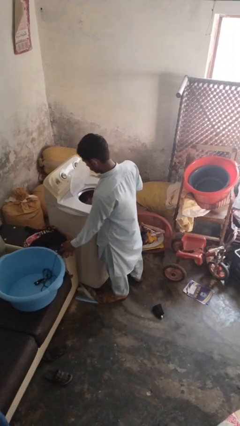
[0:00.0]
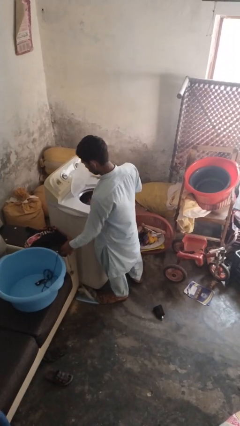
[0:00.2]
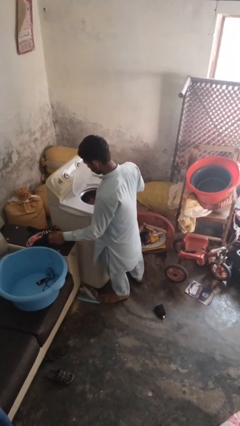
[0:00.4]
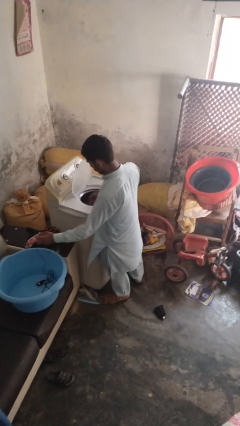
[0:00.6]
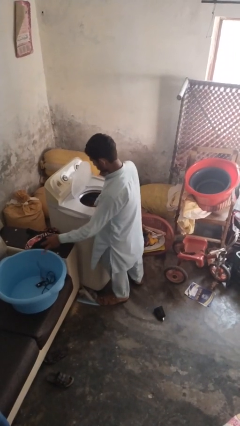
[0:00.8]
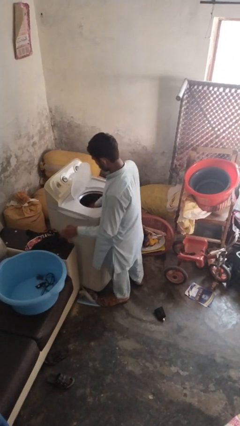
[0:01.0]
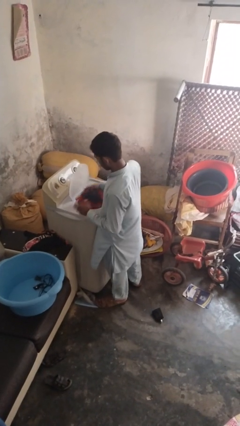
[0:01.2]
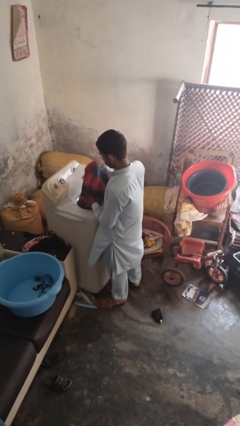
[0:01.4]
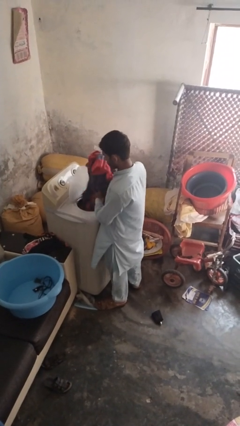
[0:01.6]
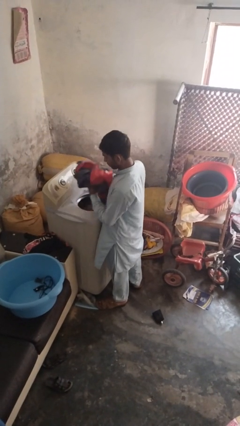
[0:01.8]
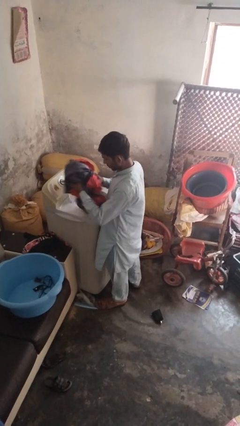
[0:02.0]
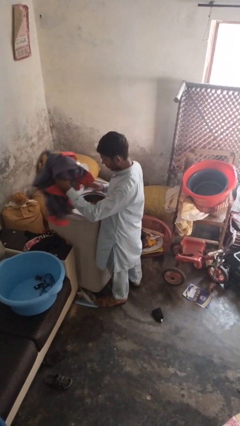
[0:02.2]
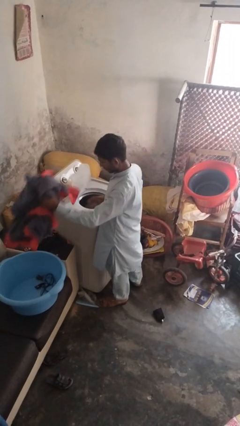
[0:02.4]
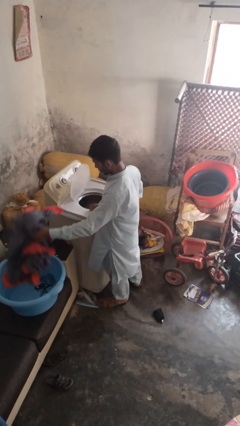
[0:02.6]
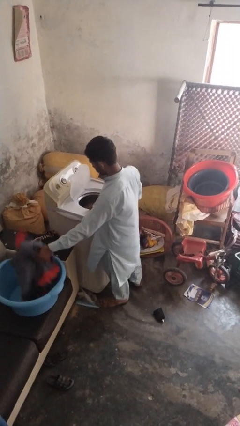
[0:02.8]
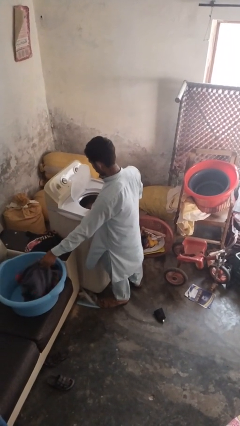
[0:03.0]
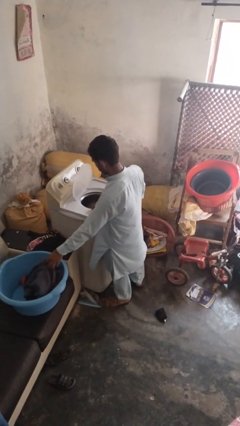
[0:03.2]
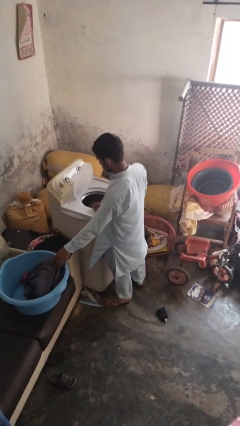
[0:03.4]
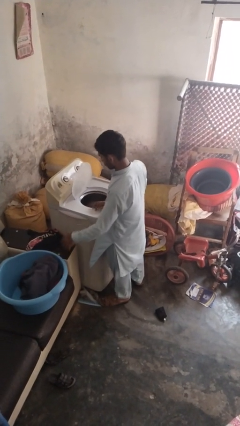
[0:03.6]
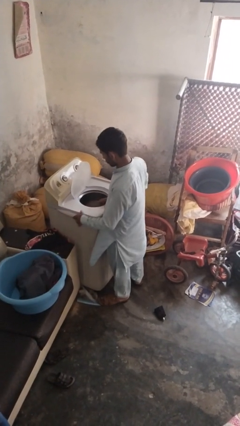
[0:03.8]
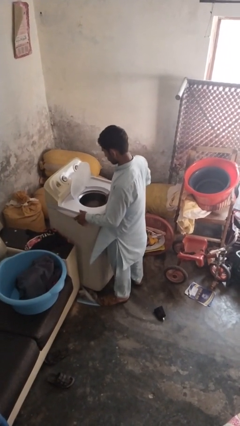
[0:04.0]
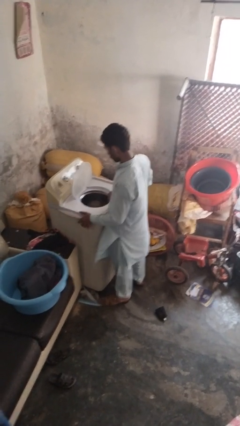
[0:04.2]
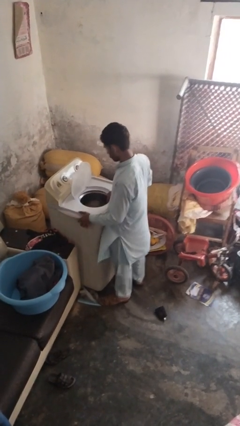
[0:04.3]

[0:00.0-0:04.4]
person loads clotheswasher

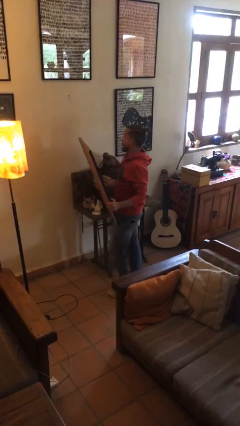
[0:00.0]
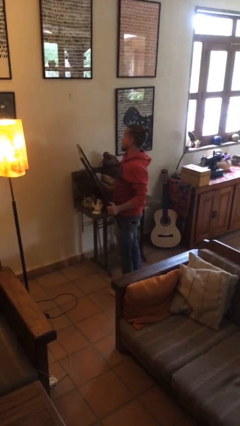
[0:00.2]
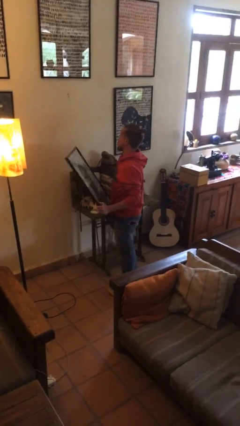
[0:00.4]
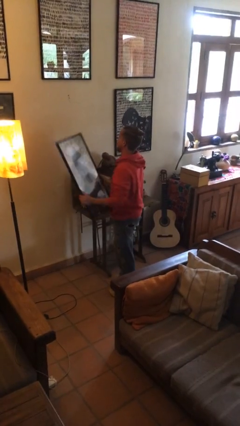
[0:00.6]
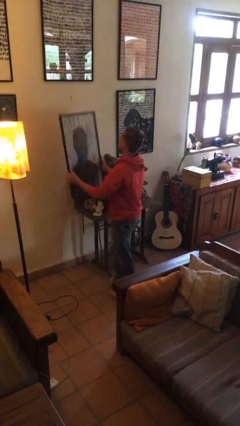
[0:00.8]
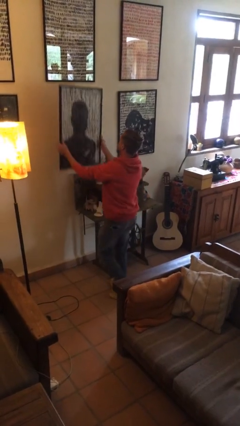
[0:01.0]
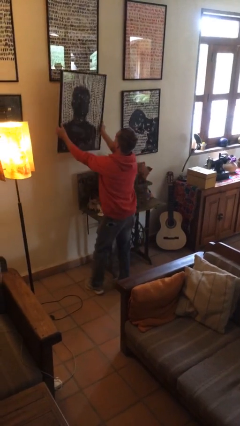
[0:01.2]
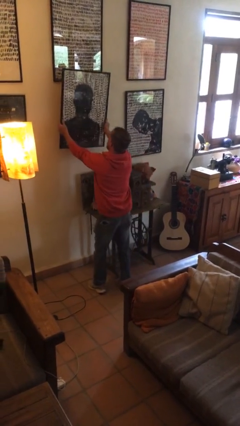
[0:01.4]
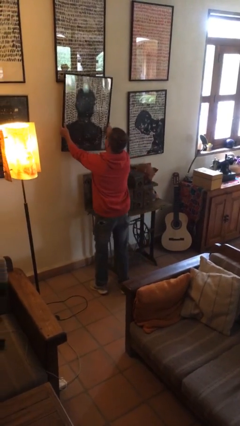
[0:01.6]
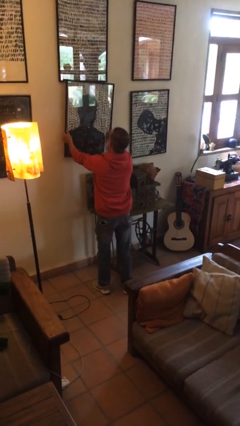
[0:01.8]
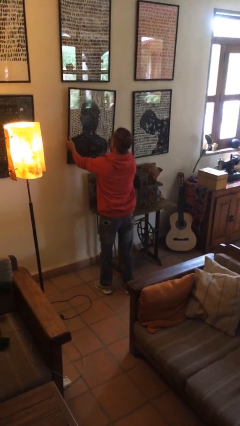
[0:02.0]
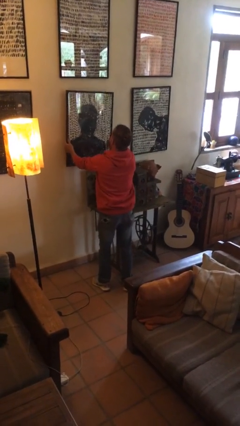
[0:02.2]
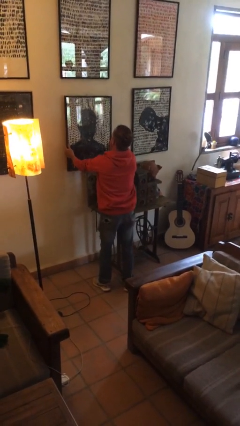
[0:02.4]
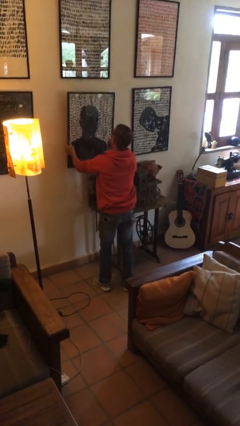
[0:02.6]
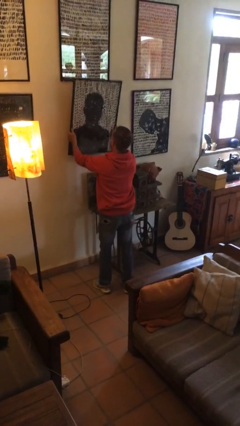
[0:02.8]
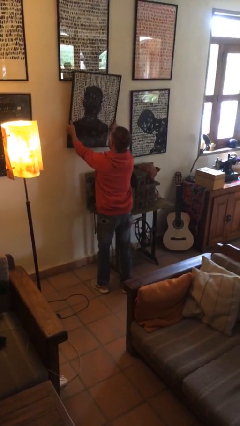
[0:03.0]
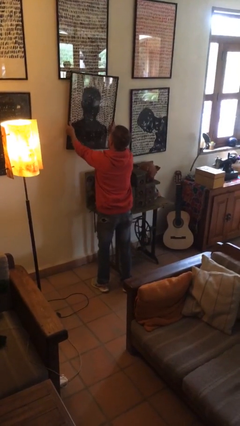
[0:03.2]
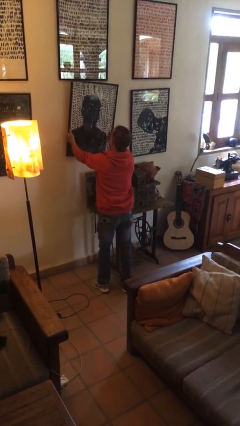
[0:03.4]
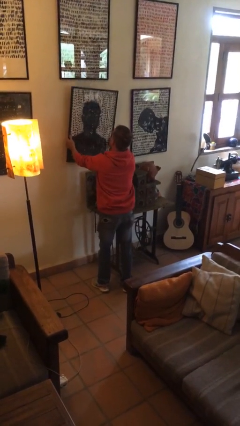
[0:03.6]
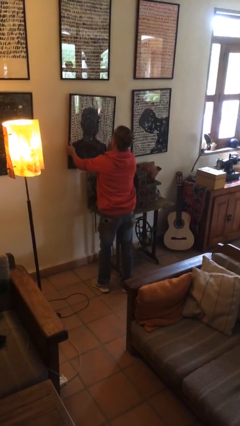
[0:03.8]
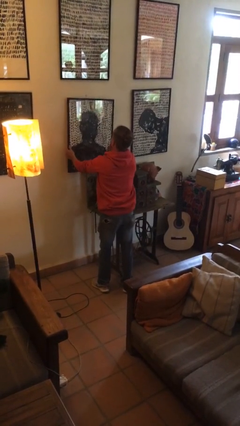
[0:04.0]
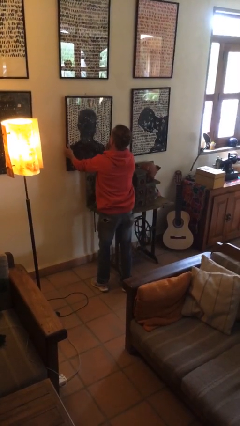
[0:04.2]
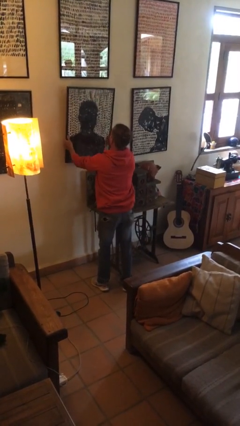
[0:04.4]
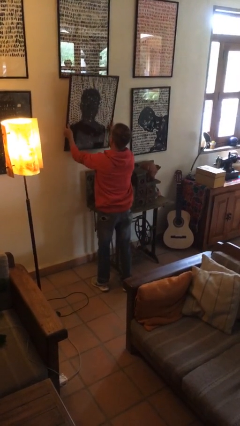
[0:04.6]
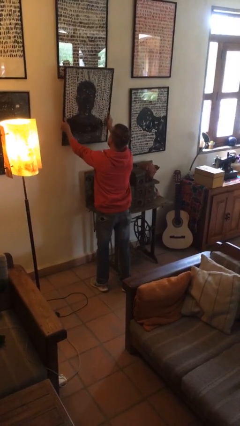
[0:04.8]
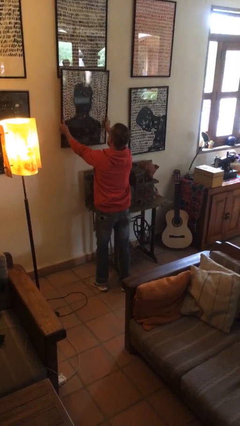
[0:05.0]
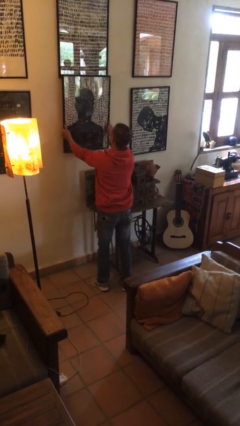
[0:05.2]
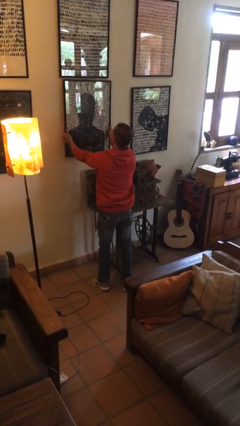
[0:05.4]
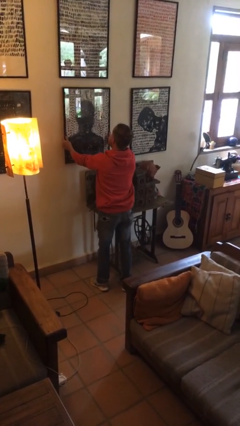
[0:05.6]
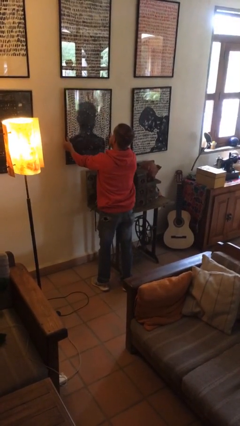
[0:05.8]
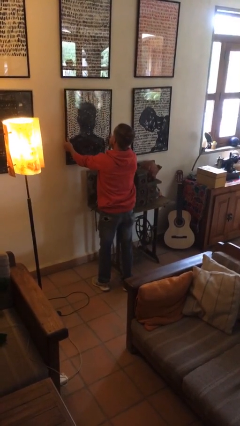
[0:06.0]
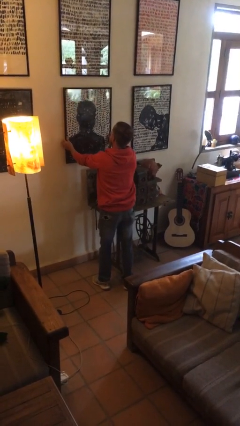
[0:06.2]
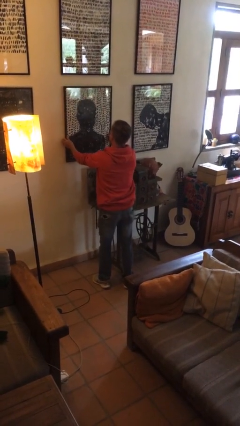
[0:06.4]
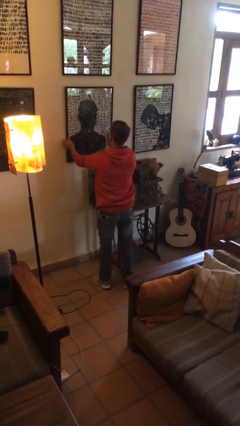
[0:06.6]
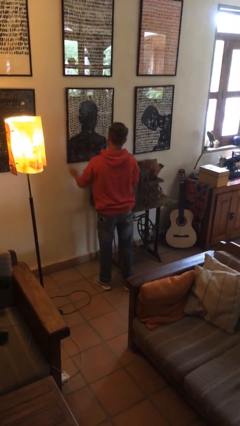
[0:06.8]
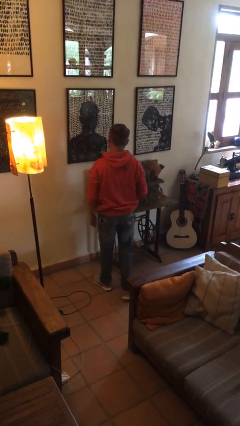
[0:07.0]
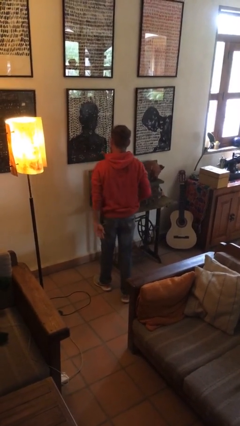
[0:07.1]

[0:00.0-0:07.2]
person puts up picture frame

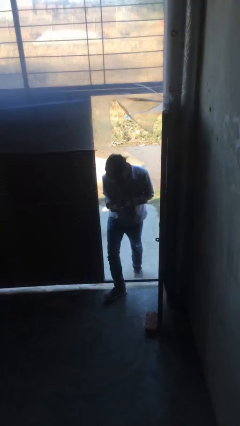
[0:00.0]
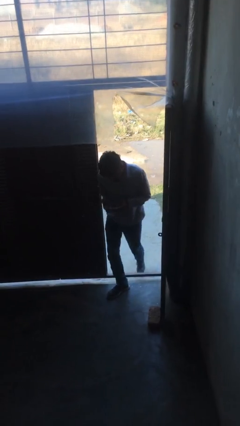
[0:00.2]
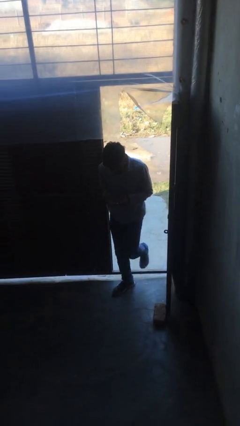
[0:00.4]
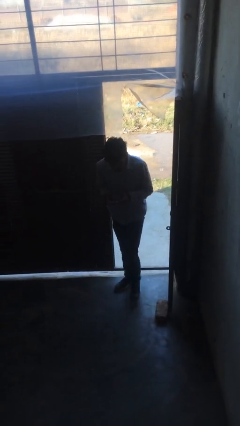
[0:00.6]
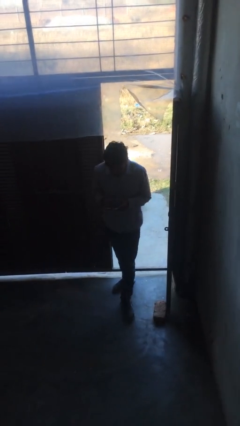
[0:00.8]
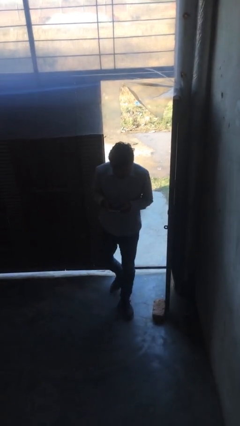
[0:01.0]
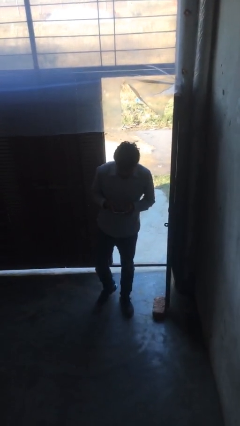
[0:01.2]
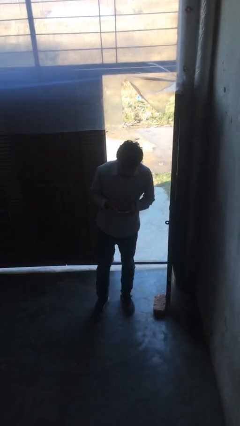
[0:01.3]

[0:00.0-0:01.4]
person enters scene through structure

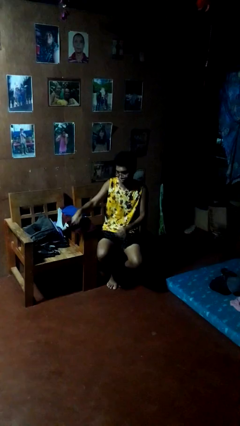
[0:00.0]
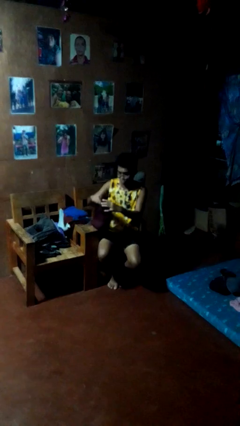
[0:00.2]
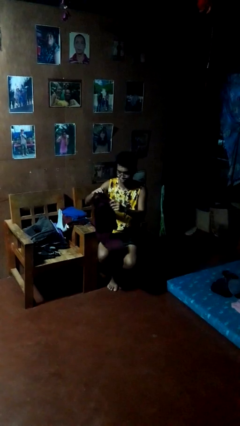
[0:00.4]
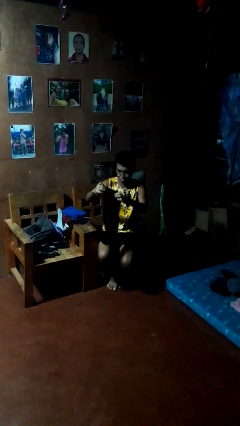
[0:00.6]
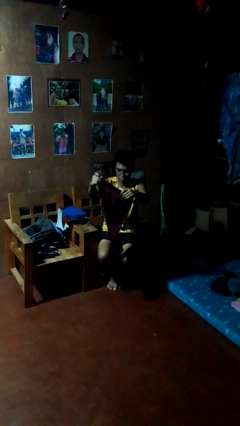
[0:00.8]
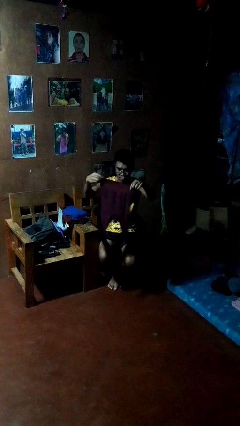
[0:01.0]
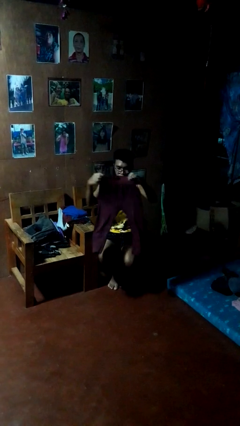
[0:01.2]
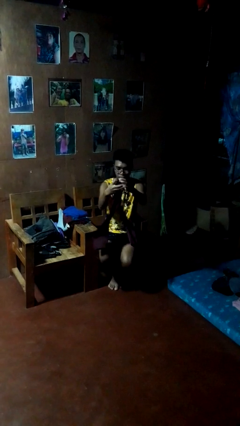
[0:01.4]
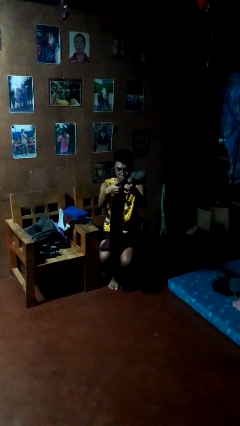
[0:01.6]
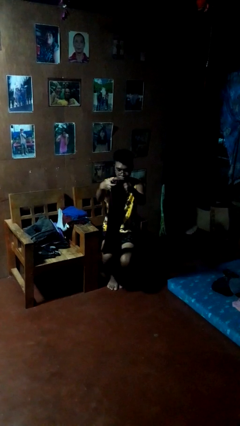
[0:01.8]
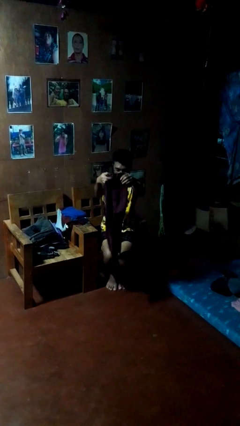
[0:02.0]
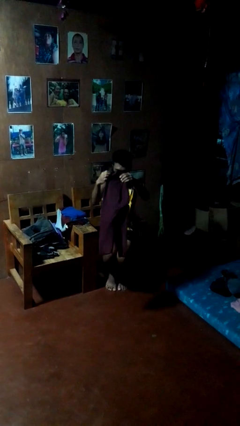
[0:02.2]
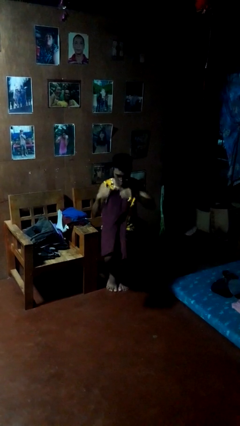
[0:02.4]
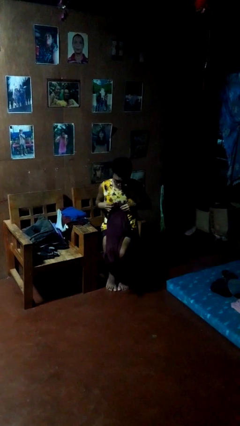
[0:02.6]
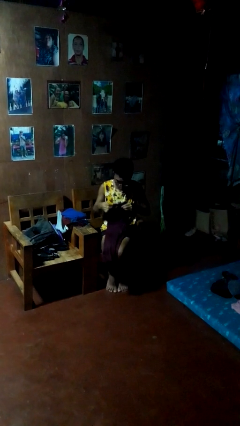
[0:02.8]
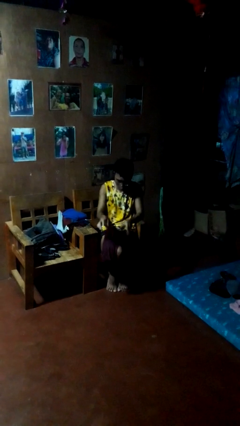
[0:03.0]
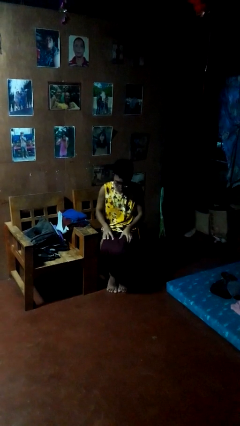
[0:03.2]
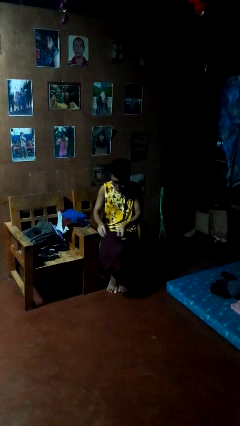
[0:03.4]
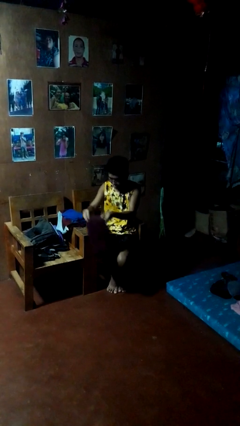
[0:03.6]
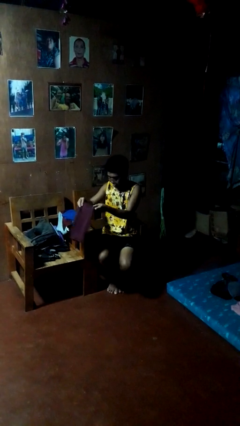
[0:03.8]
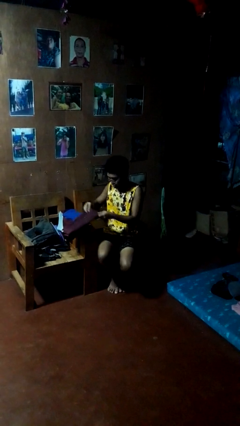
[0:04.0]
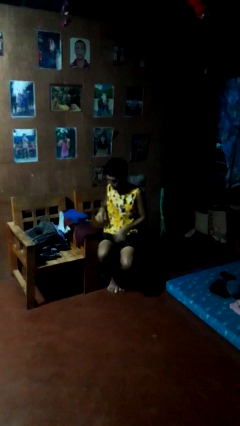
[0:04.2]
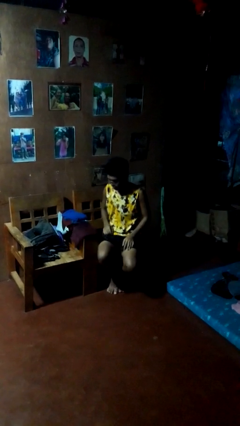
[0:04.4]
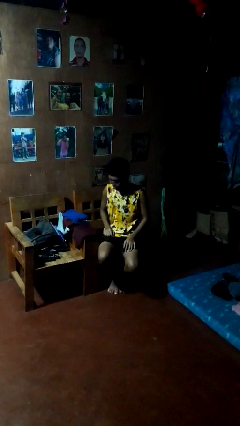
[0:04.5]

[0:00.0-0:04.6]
person folds pants
